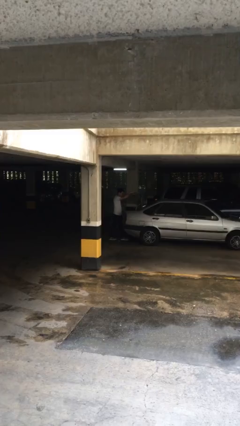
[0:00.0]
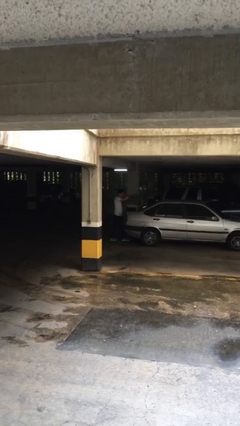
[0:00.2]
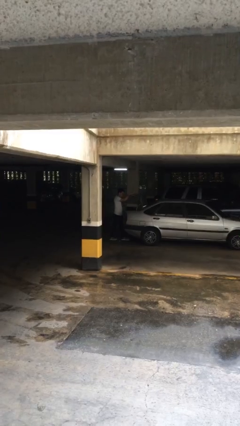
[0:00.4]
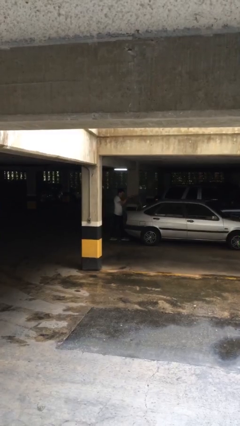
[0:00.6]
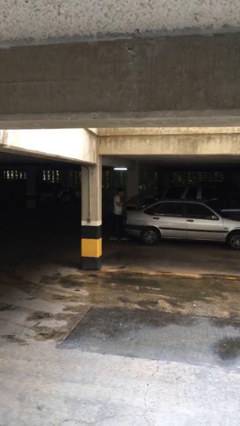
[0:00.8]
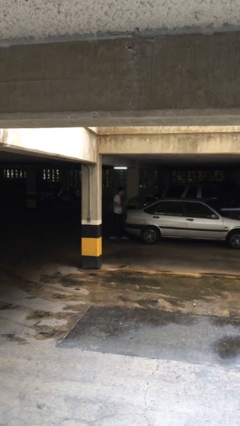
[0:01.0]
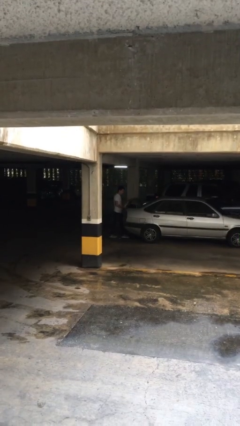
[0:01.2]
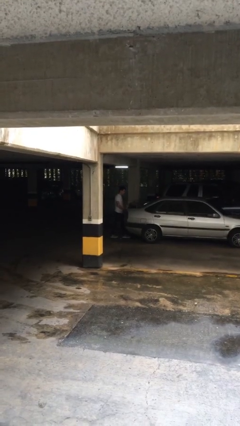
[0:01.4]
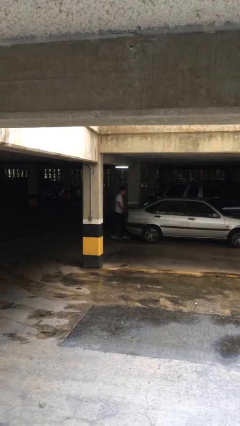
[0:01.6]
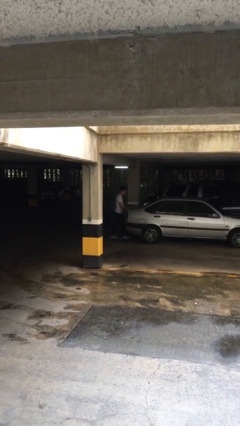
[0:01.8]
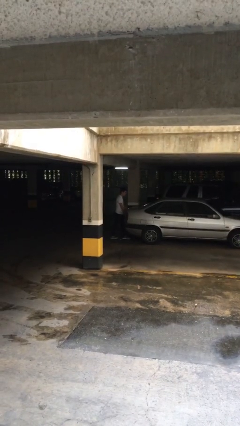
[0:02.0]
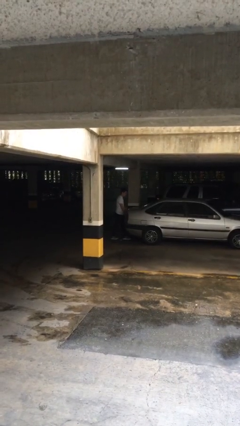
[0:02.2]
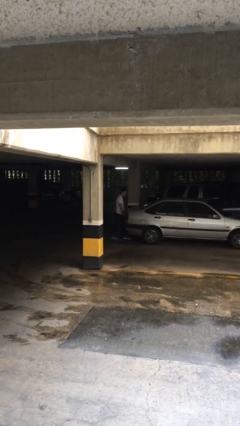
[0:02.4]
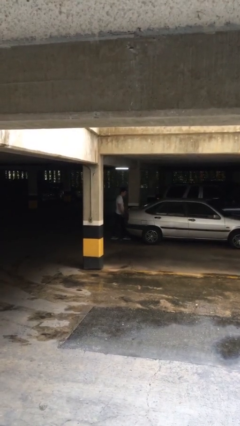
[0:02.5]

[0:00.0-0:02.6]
person closes car trunk

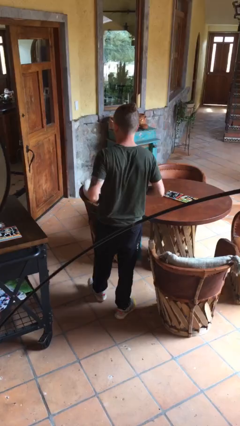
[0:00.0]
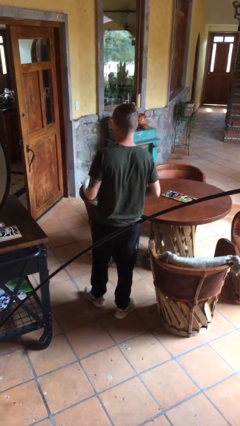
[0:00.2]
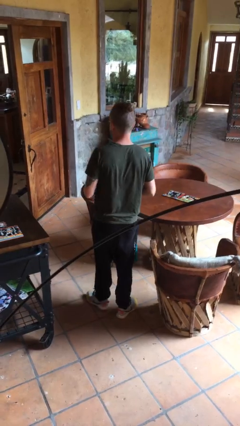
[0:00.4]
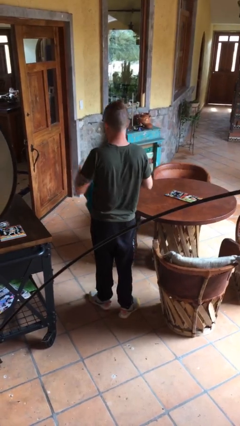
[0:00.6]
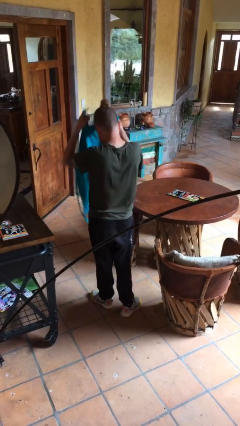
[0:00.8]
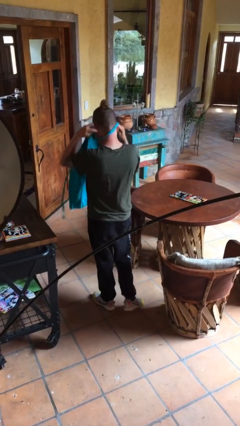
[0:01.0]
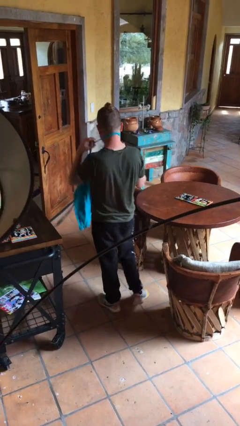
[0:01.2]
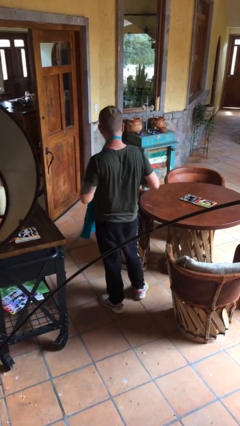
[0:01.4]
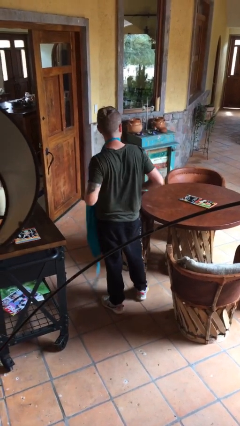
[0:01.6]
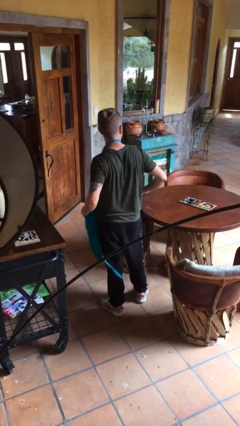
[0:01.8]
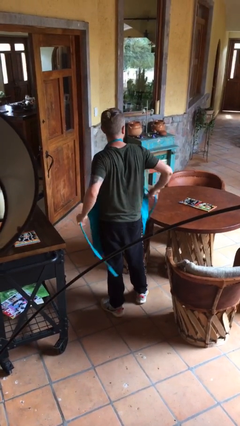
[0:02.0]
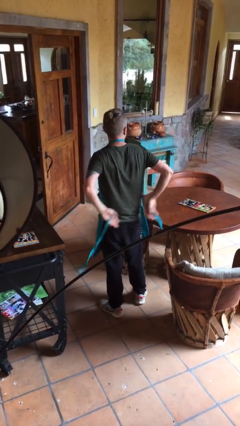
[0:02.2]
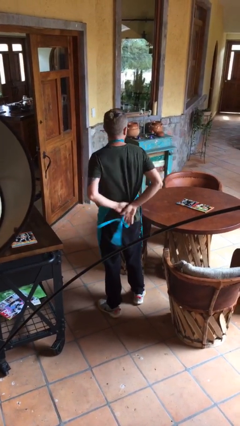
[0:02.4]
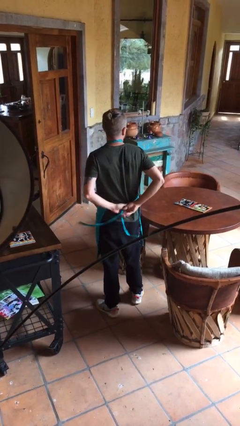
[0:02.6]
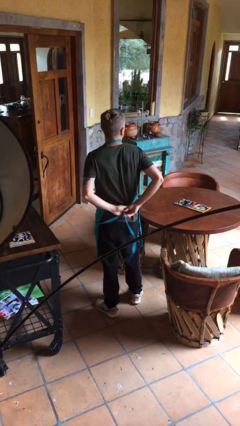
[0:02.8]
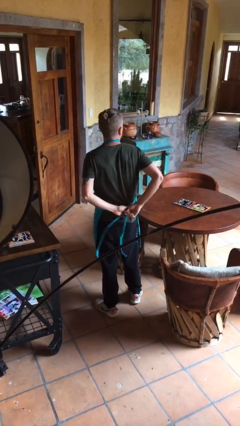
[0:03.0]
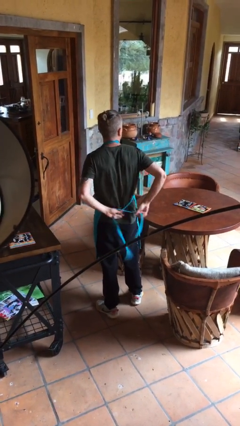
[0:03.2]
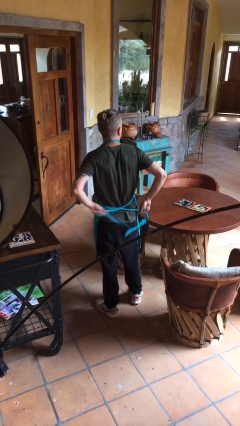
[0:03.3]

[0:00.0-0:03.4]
person puts on apron

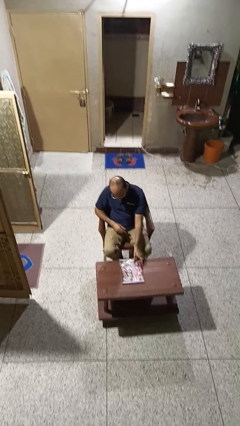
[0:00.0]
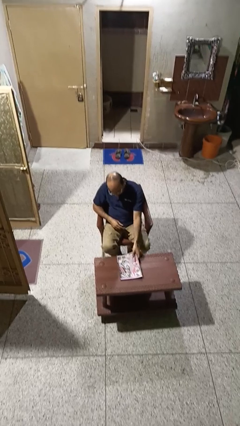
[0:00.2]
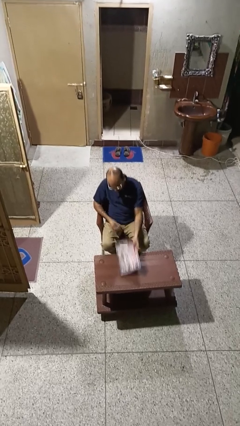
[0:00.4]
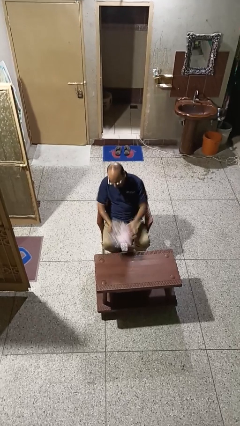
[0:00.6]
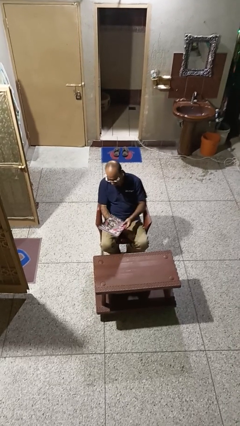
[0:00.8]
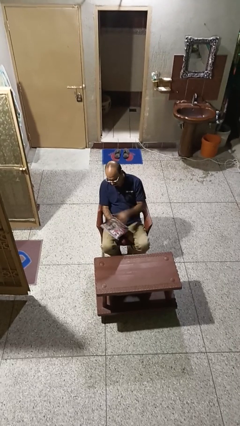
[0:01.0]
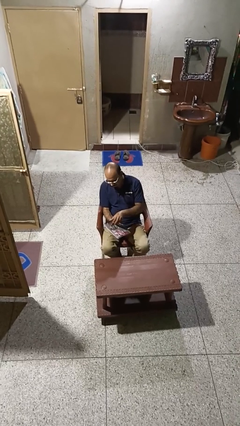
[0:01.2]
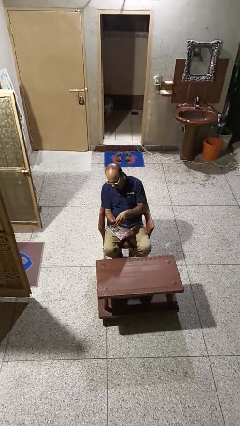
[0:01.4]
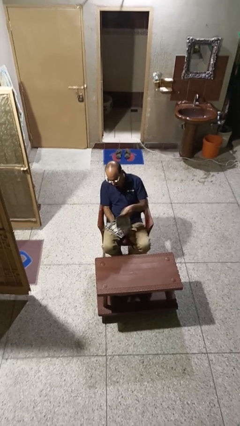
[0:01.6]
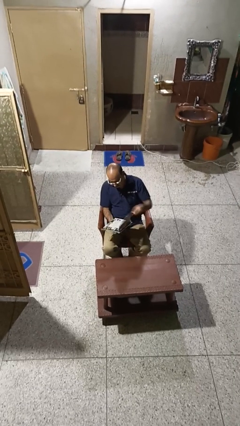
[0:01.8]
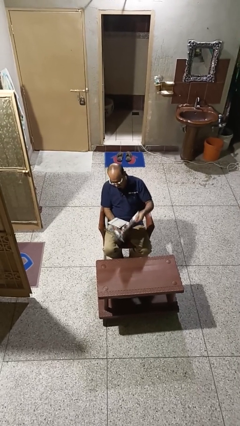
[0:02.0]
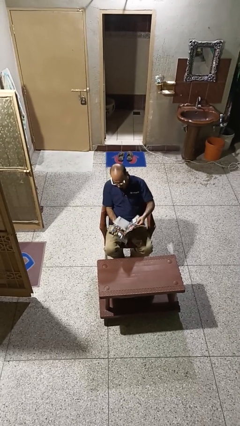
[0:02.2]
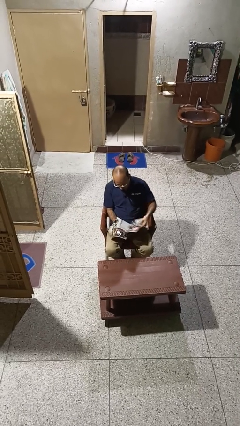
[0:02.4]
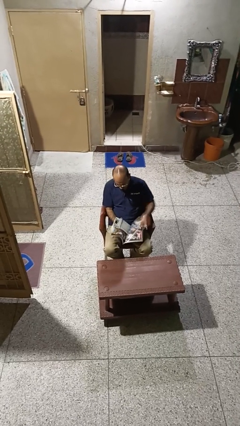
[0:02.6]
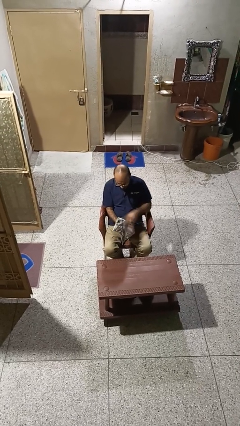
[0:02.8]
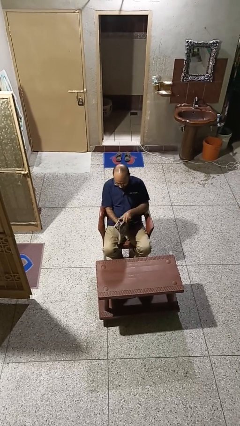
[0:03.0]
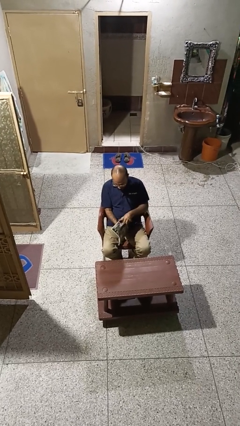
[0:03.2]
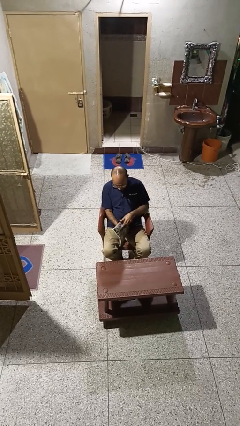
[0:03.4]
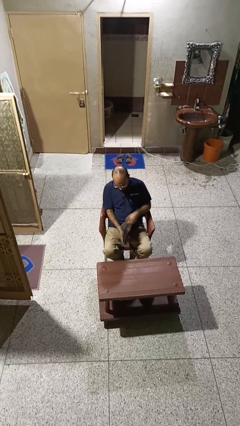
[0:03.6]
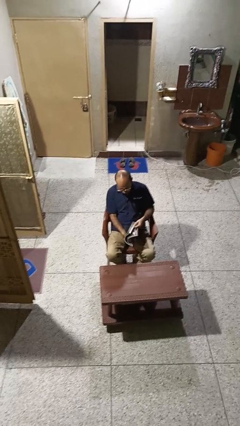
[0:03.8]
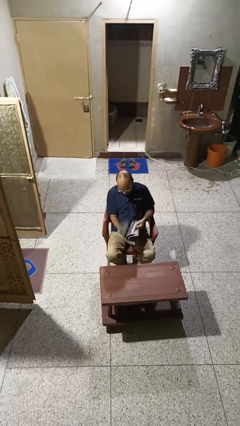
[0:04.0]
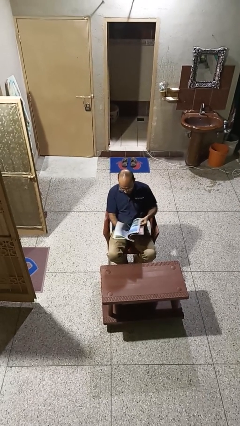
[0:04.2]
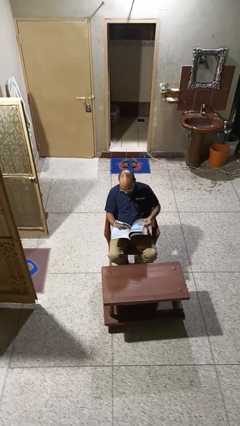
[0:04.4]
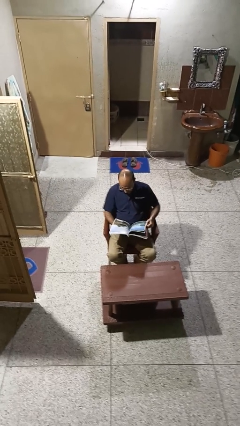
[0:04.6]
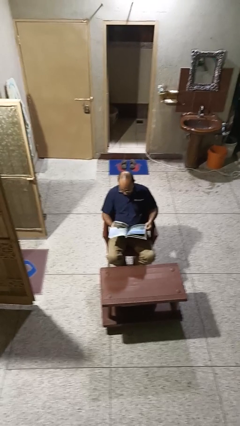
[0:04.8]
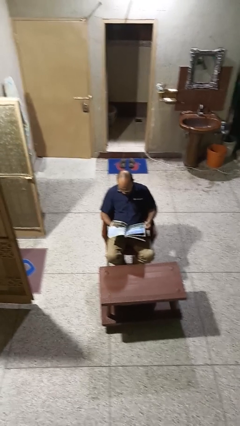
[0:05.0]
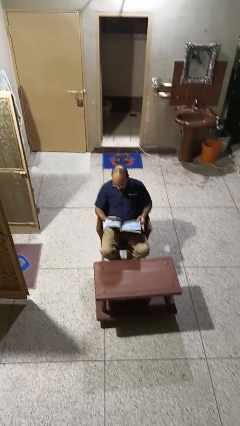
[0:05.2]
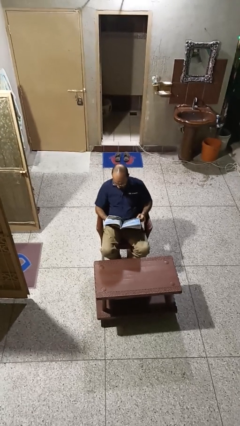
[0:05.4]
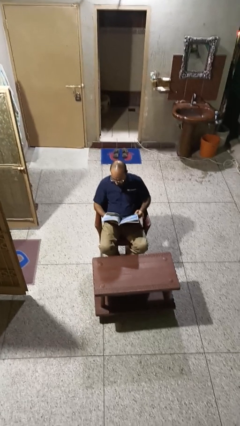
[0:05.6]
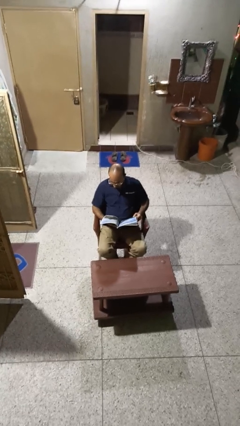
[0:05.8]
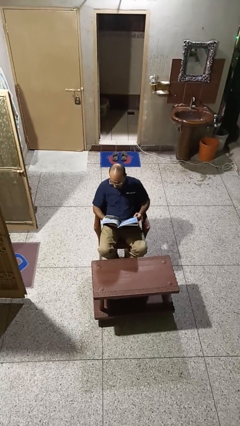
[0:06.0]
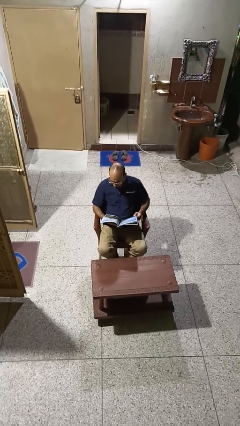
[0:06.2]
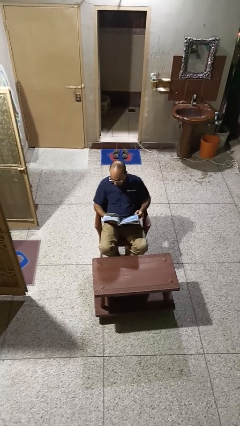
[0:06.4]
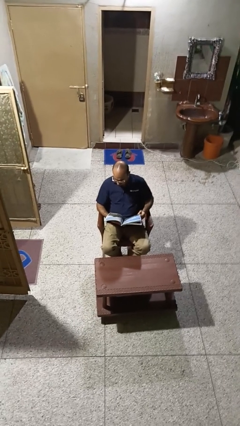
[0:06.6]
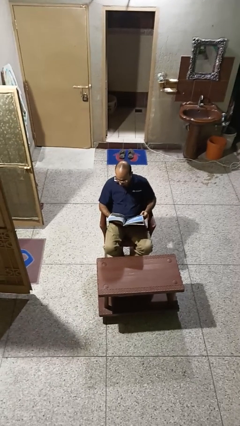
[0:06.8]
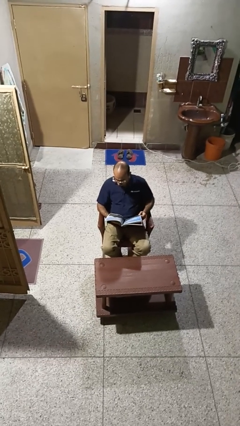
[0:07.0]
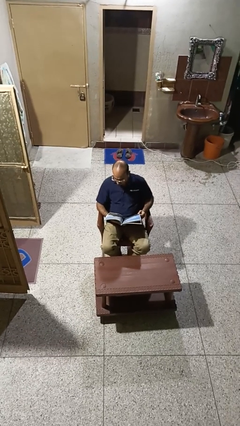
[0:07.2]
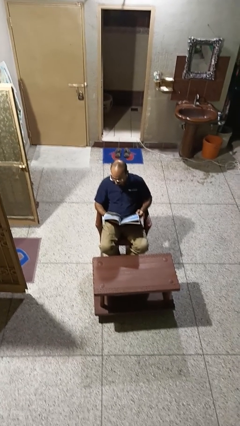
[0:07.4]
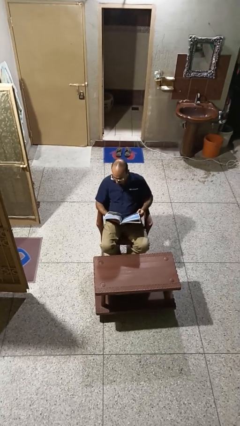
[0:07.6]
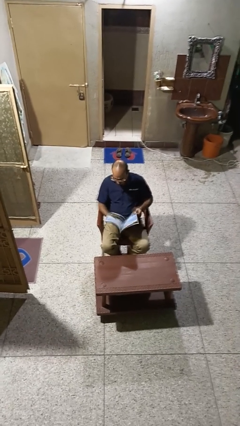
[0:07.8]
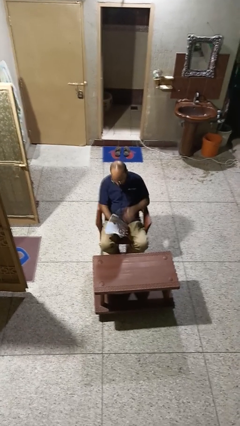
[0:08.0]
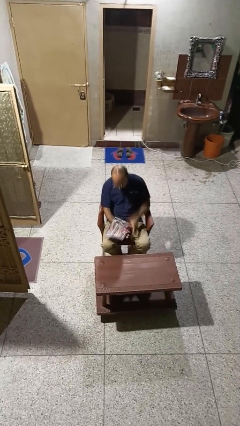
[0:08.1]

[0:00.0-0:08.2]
person reads magazine

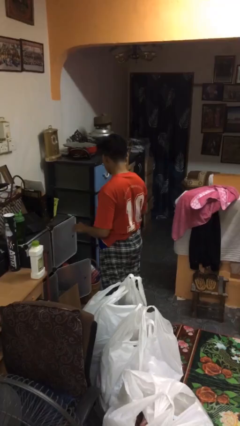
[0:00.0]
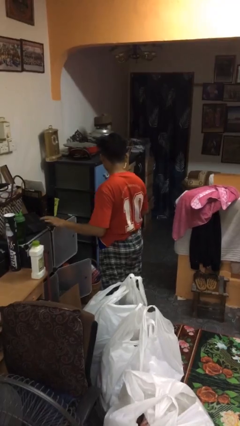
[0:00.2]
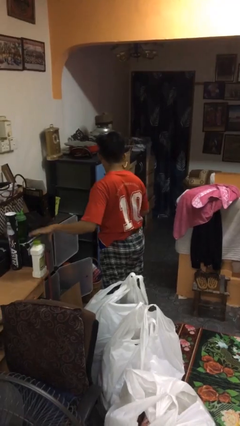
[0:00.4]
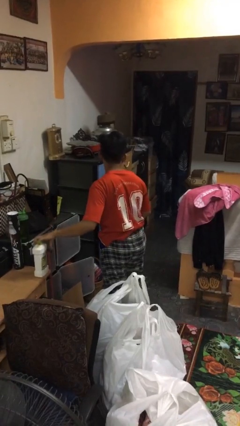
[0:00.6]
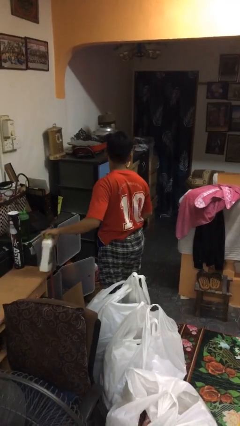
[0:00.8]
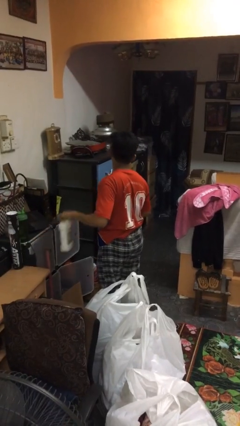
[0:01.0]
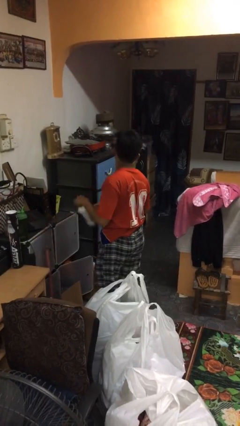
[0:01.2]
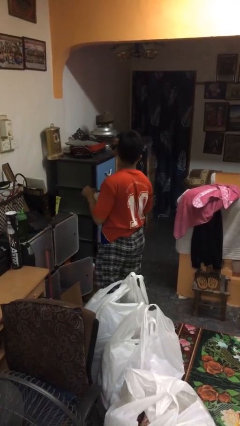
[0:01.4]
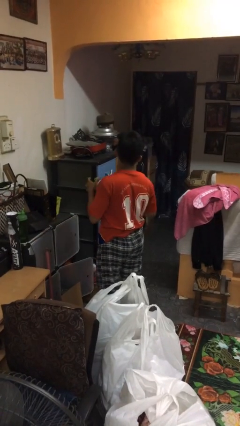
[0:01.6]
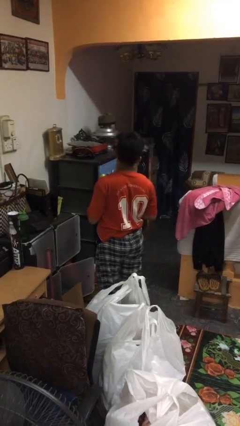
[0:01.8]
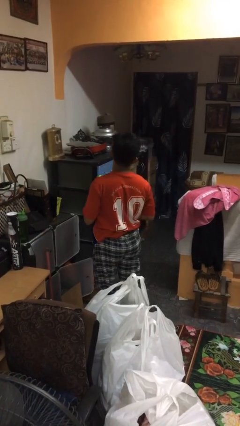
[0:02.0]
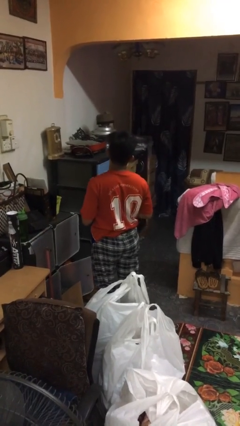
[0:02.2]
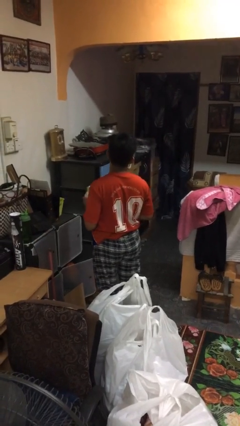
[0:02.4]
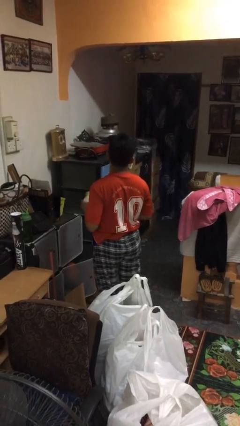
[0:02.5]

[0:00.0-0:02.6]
person picks up object from countertop

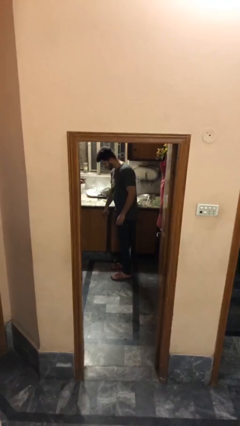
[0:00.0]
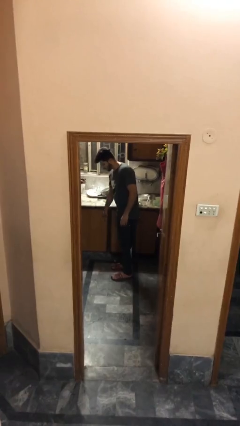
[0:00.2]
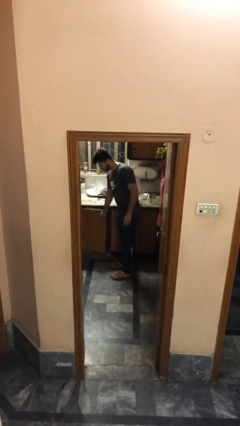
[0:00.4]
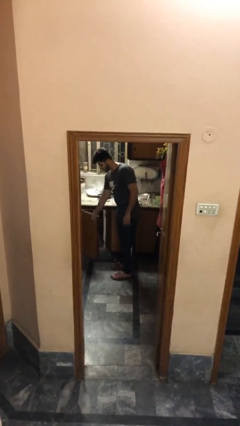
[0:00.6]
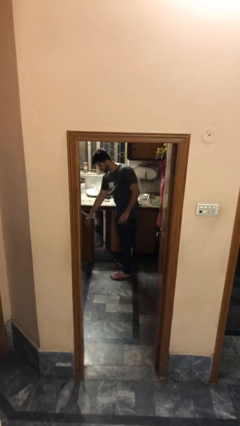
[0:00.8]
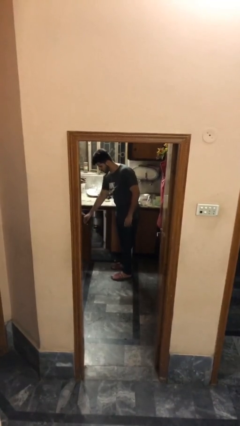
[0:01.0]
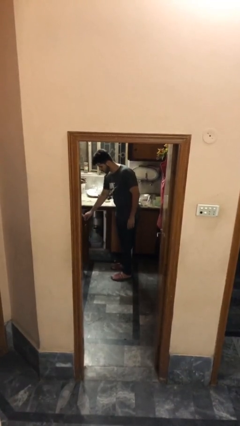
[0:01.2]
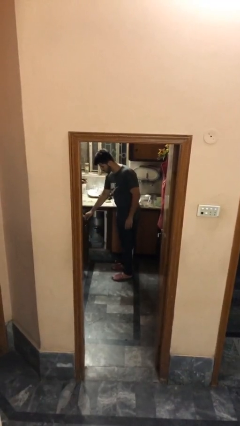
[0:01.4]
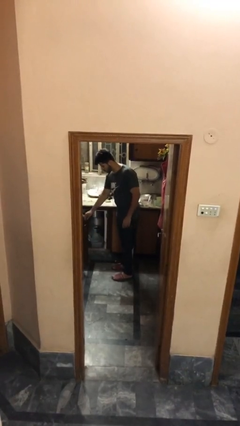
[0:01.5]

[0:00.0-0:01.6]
person opens cabinet
